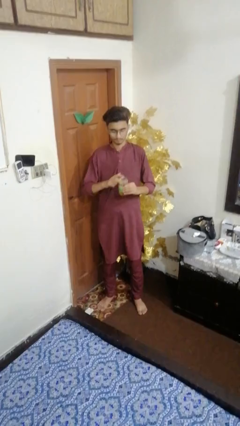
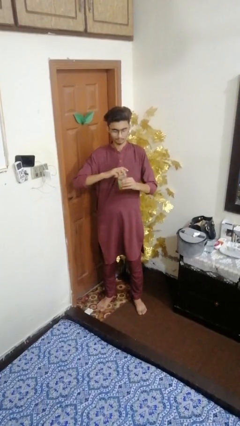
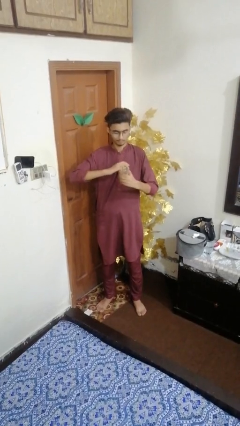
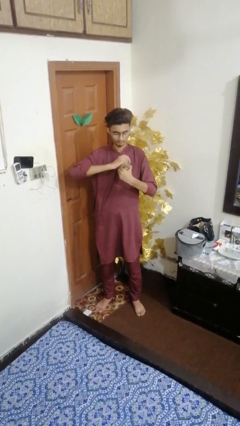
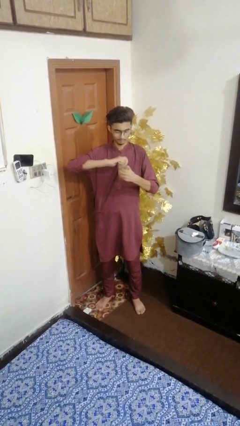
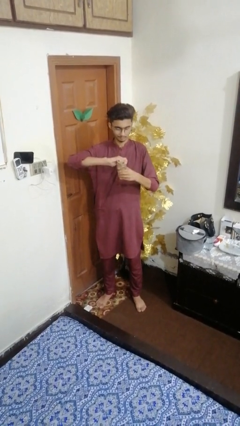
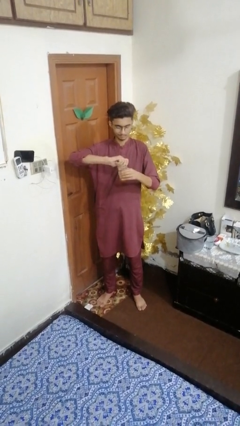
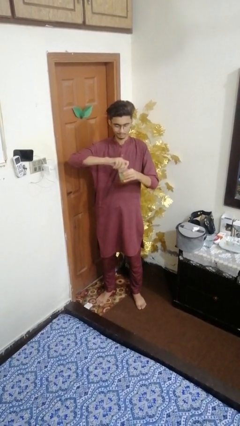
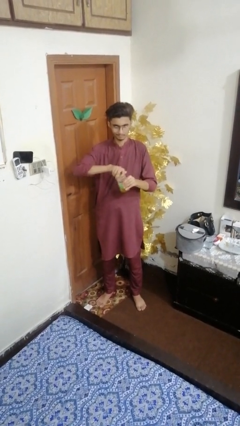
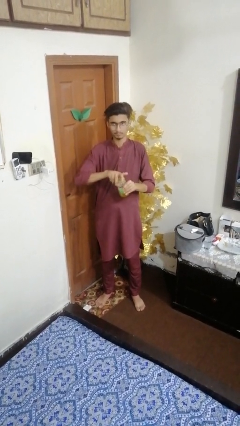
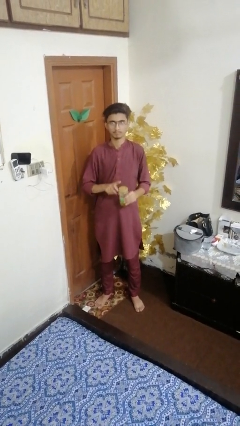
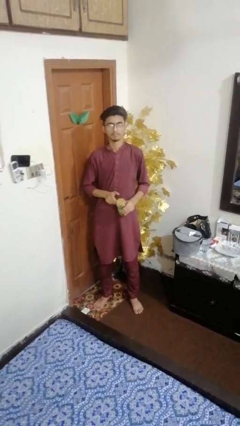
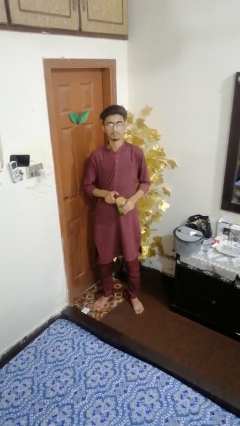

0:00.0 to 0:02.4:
person closes jar

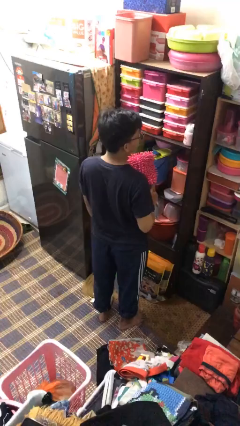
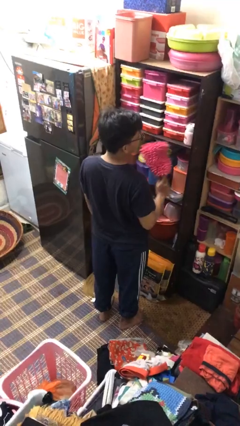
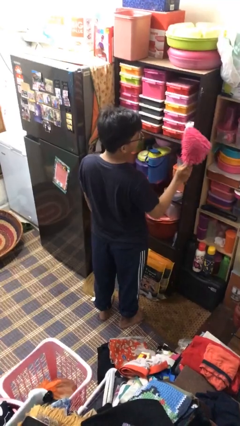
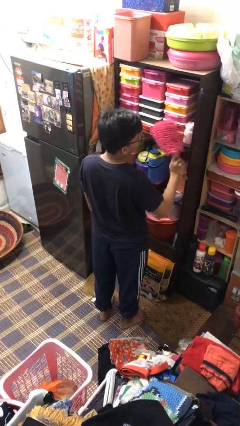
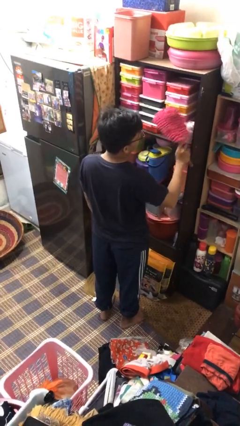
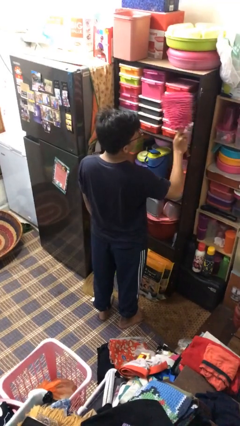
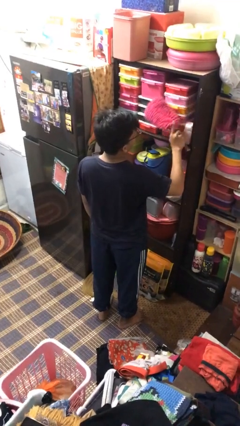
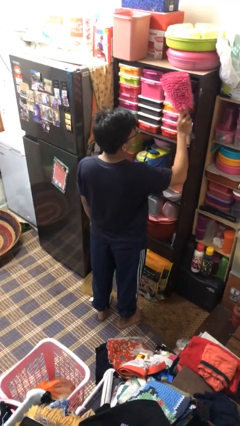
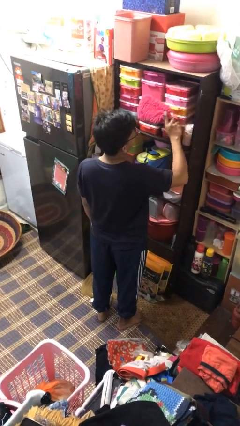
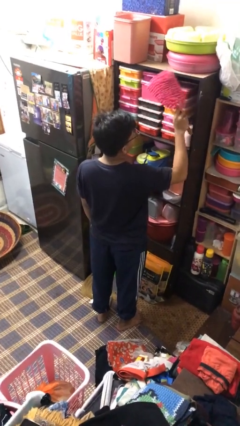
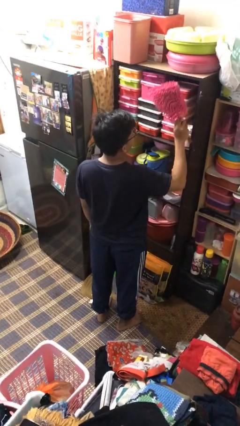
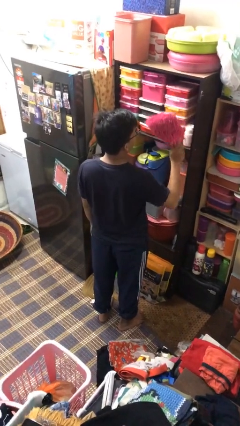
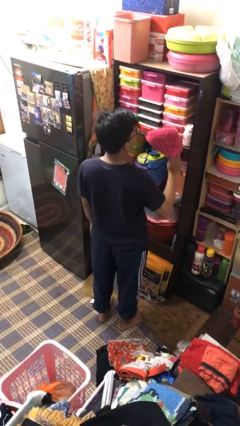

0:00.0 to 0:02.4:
person dusts furniture

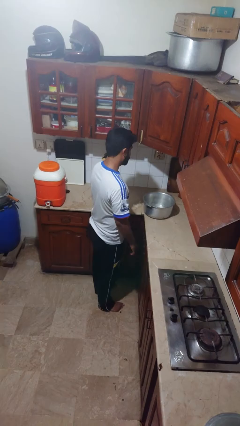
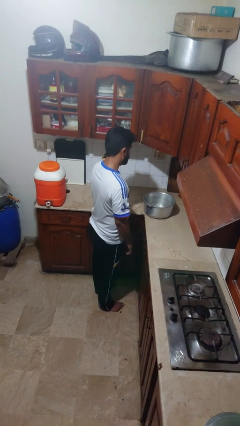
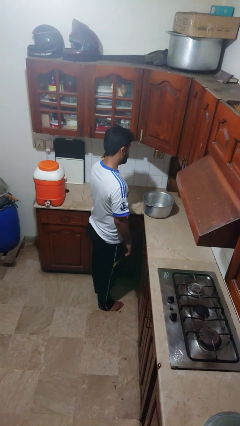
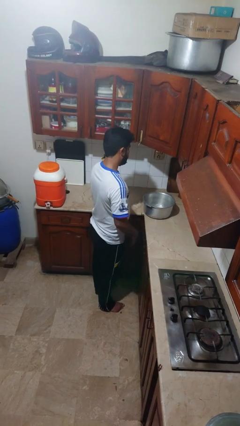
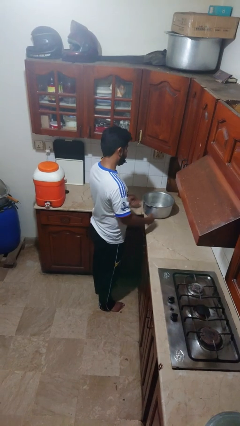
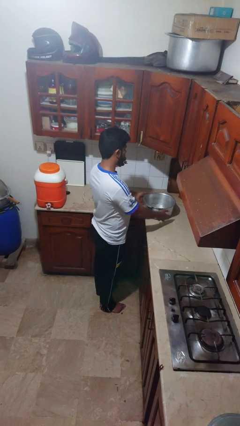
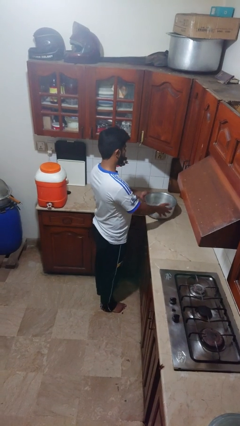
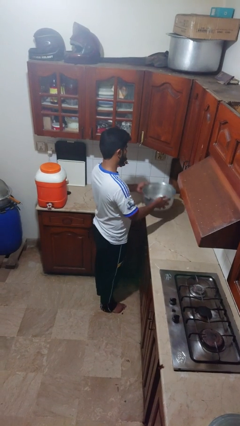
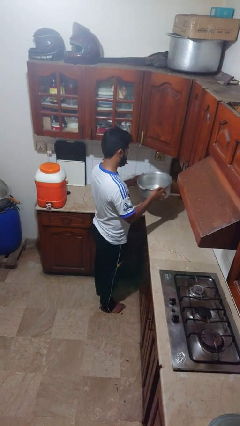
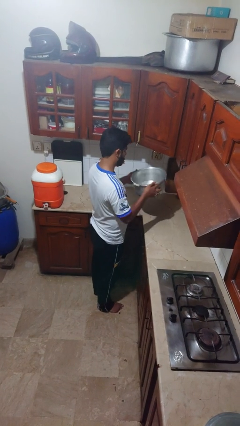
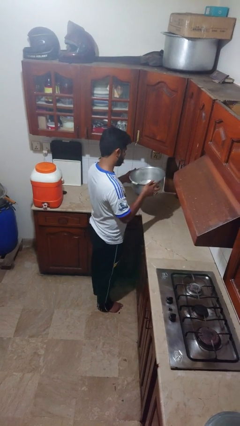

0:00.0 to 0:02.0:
person picks up object from countertop

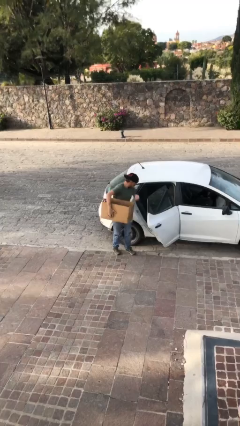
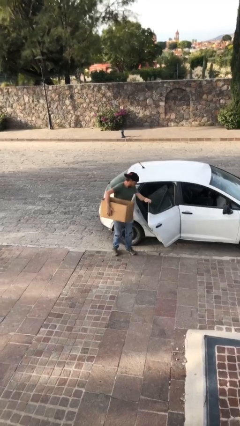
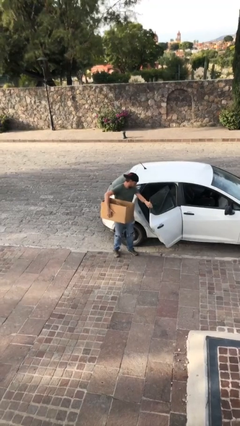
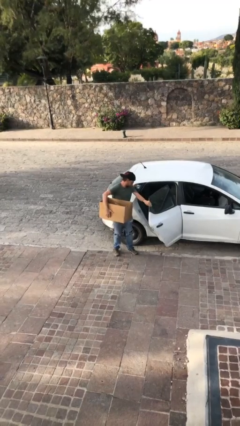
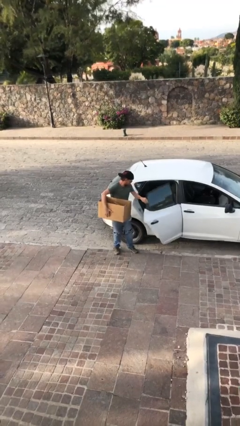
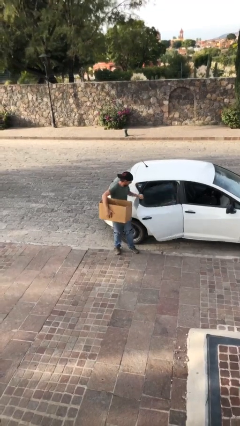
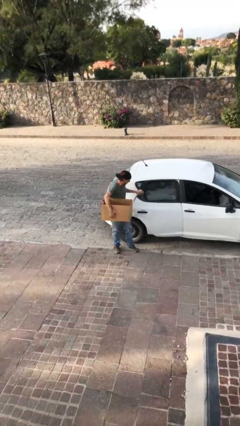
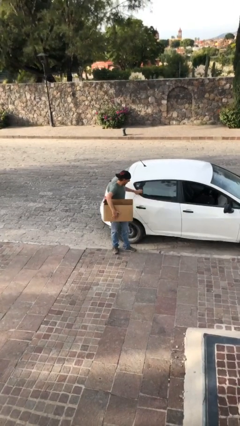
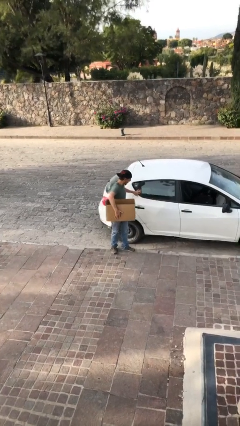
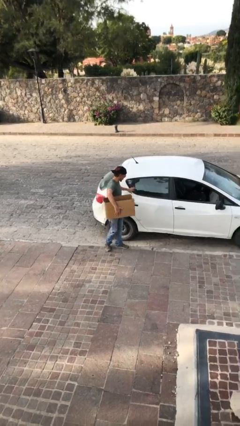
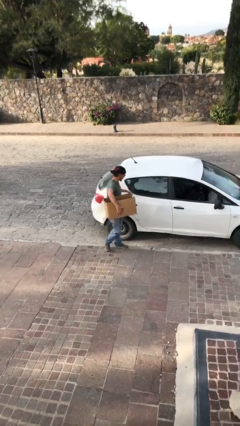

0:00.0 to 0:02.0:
person closes car door

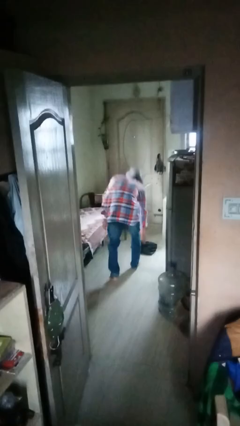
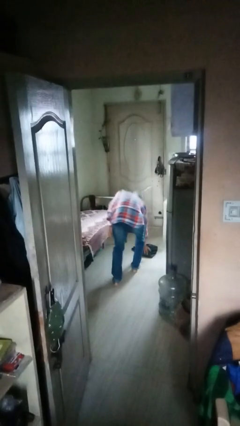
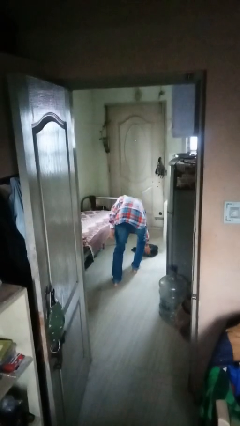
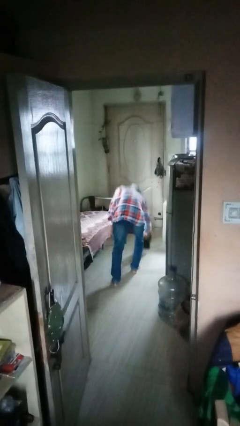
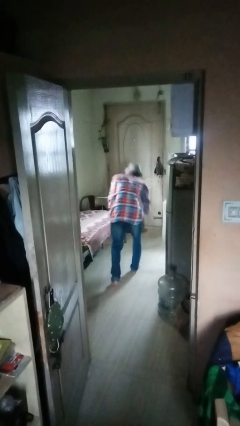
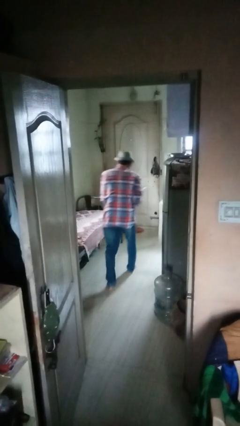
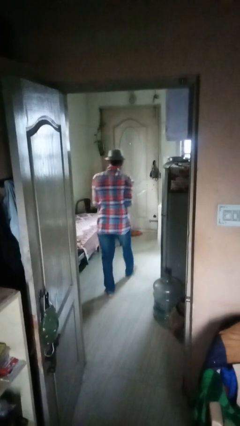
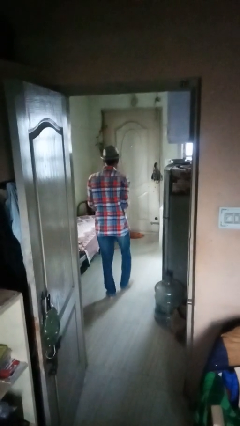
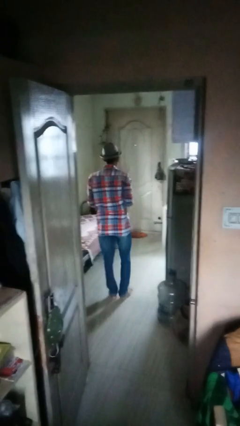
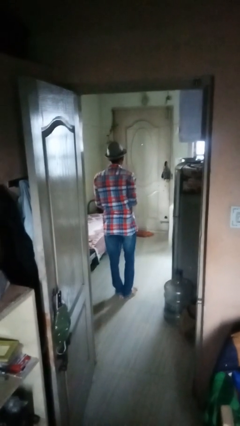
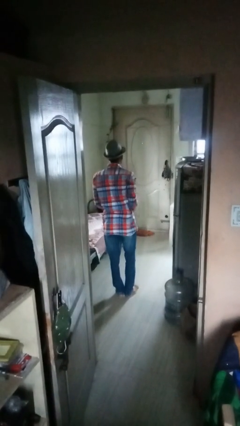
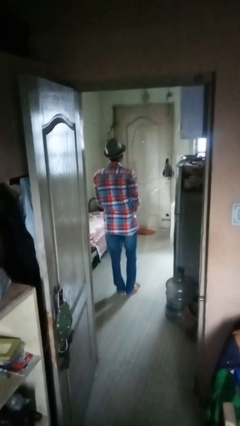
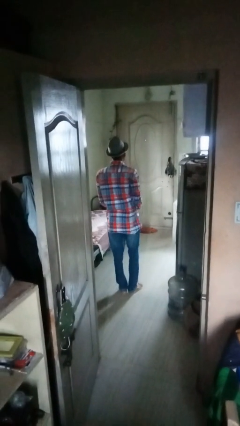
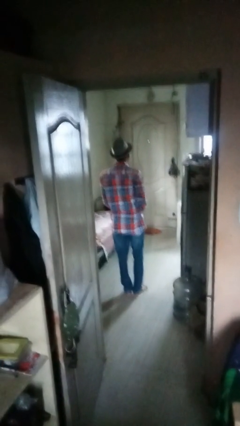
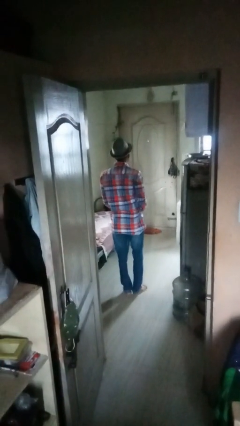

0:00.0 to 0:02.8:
person picks up object from floor

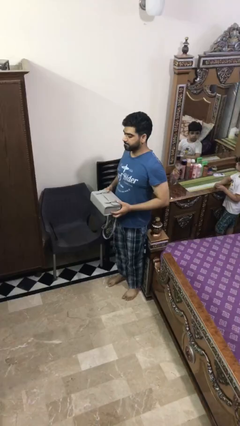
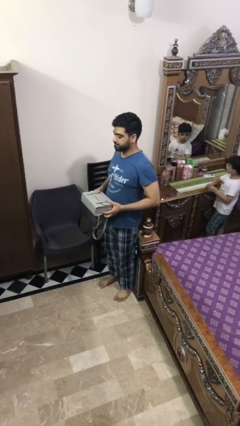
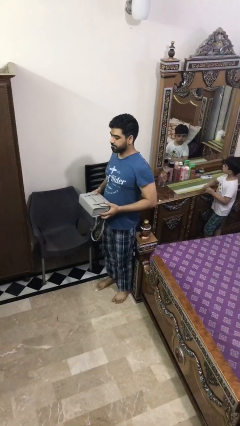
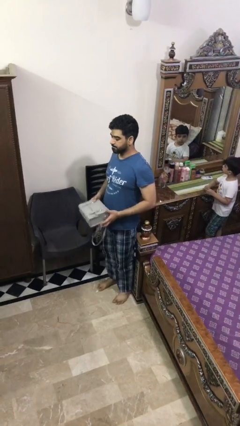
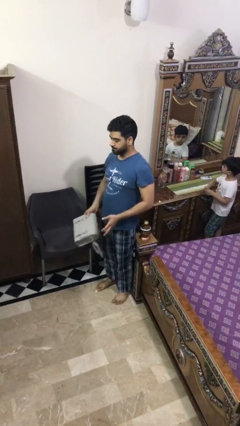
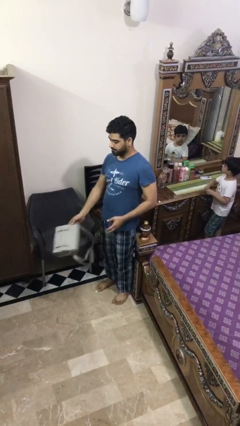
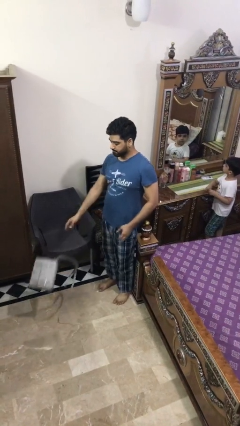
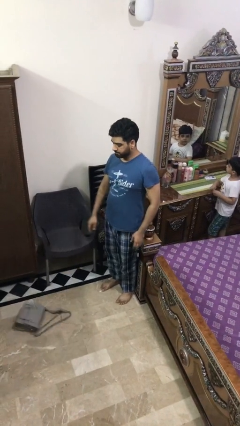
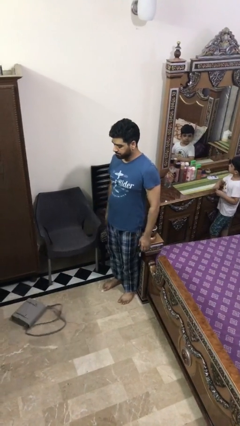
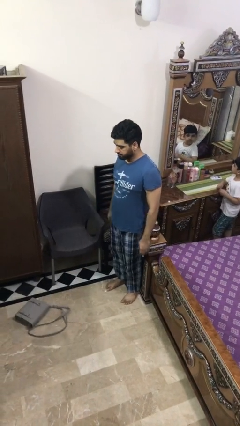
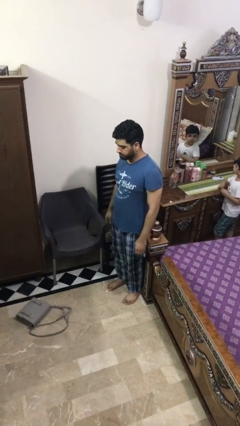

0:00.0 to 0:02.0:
person throws object to ground

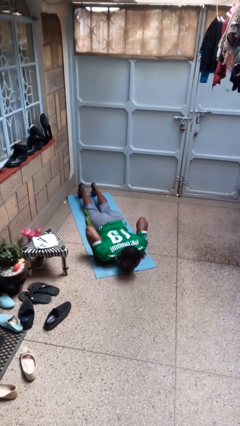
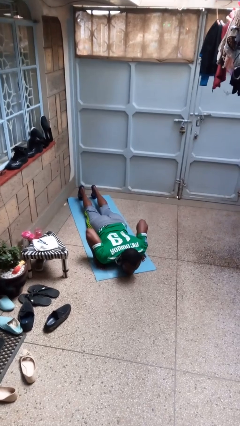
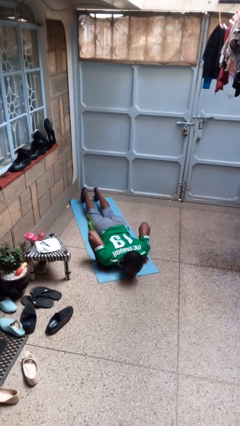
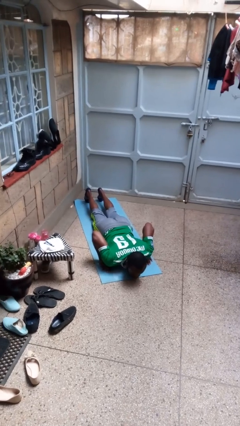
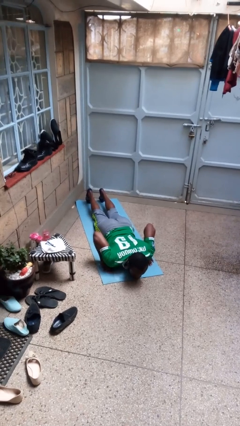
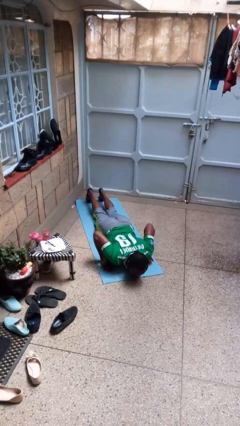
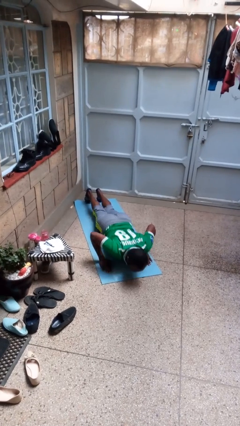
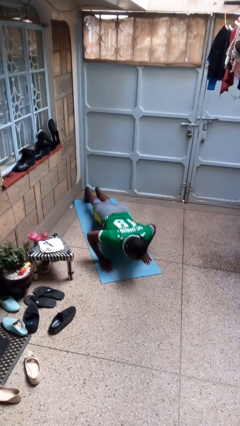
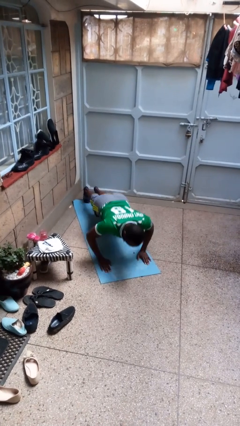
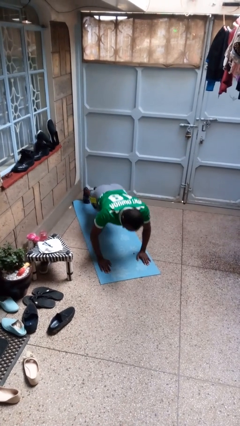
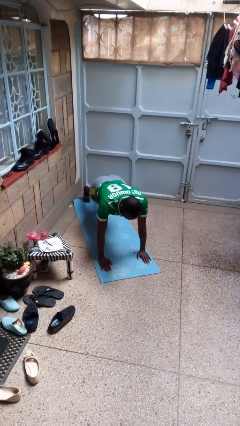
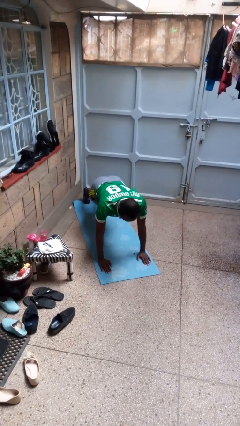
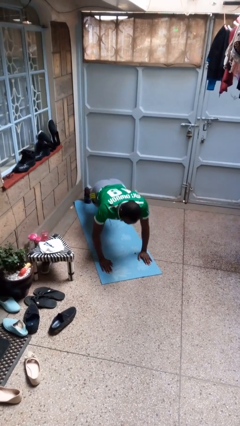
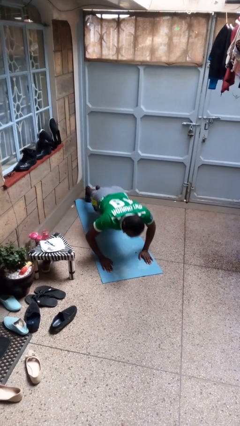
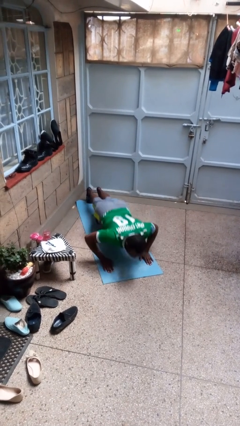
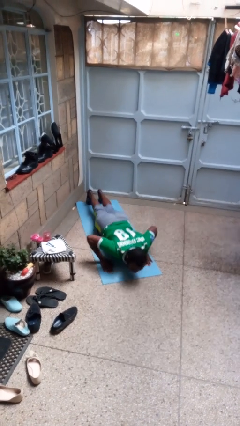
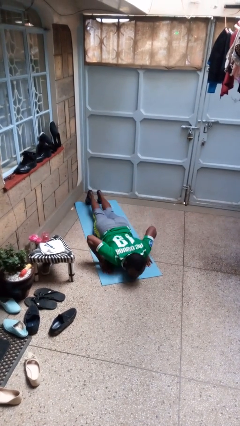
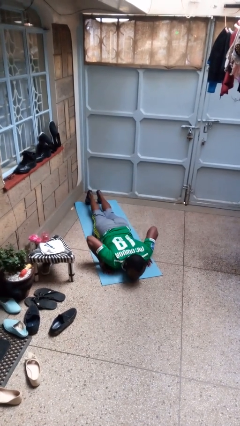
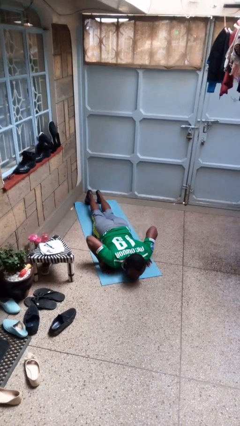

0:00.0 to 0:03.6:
person exercises with pushup
